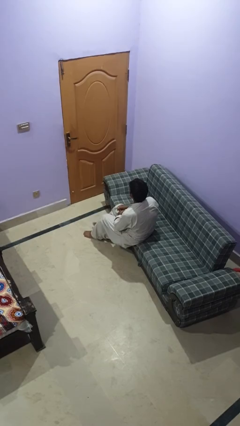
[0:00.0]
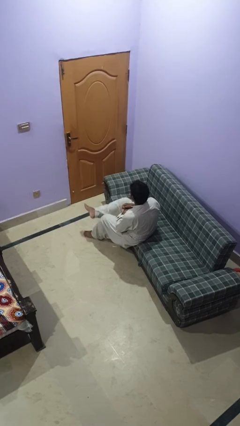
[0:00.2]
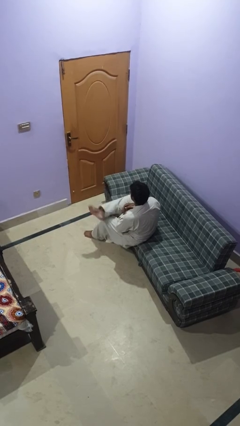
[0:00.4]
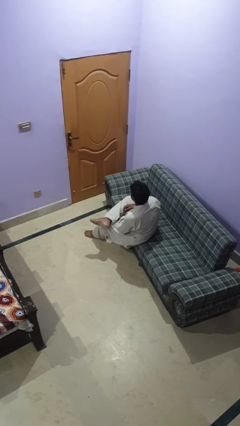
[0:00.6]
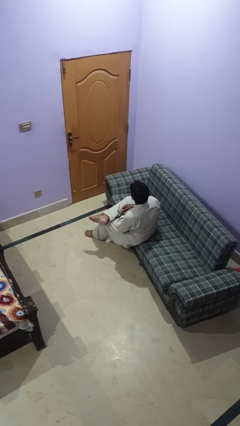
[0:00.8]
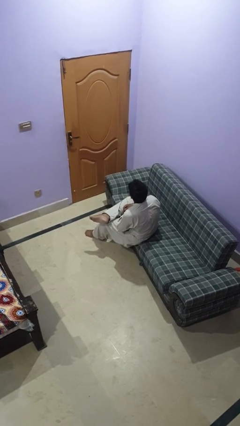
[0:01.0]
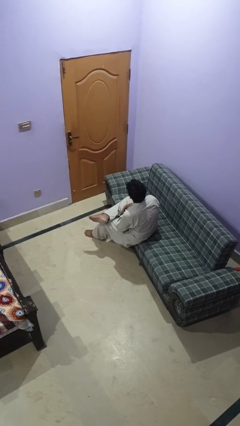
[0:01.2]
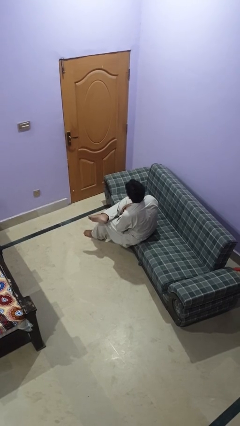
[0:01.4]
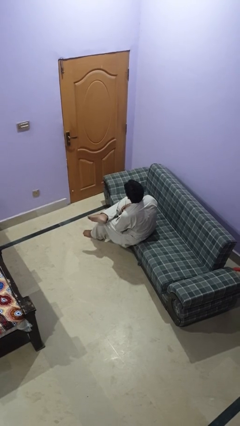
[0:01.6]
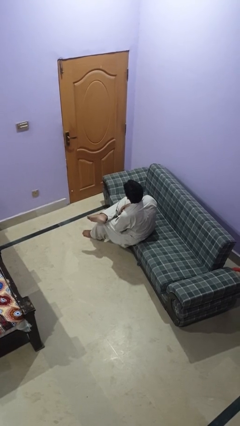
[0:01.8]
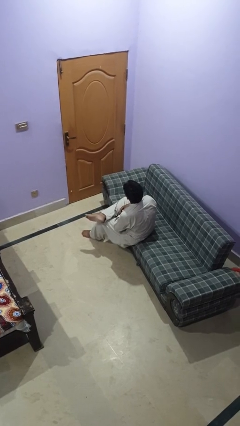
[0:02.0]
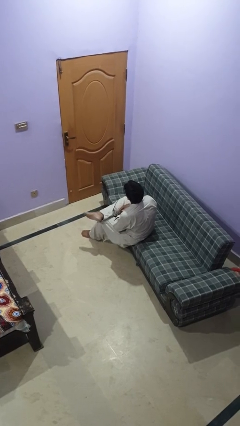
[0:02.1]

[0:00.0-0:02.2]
person crosses legs

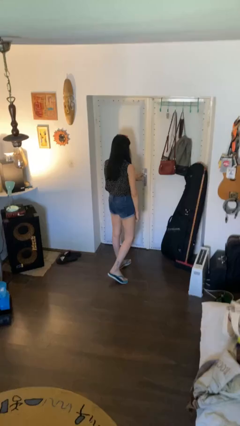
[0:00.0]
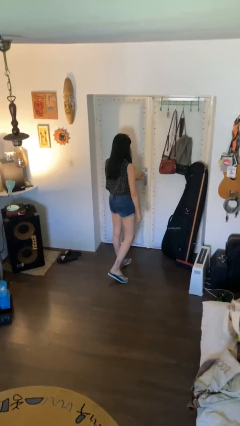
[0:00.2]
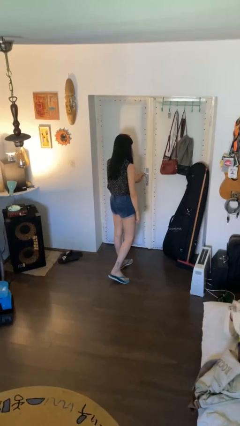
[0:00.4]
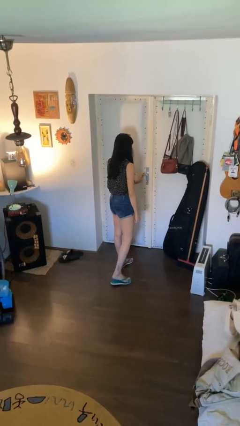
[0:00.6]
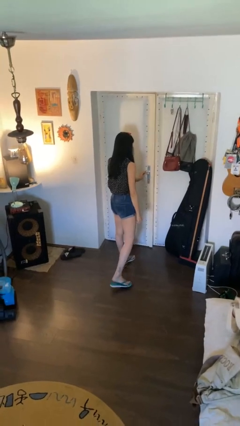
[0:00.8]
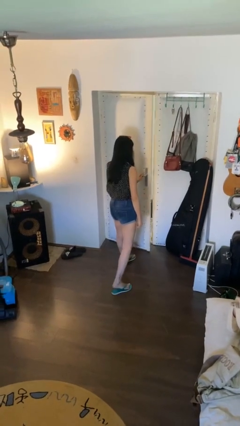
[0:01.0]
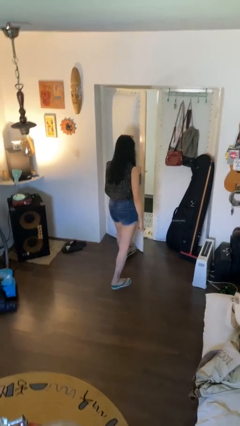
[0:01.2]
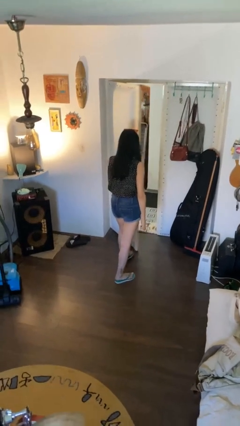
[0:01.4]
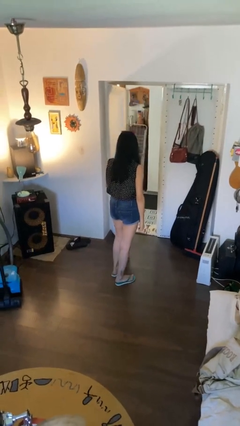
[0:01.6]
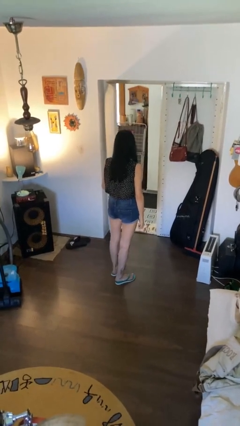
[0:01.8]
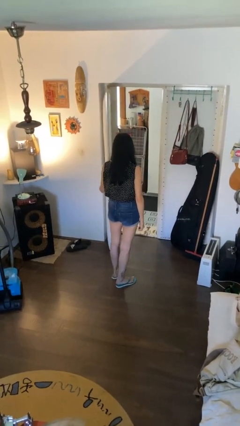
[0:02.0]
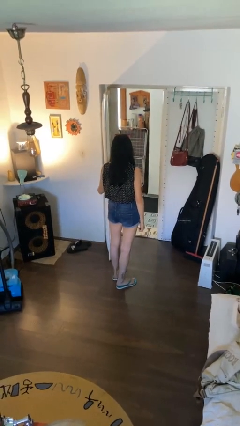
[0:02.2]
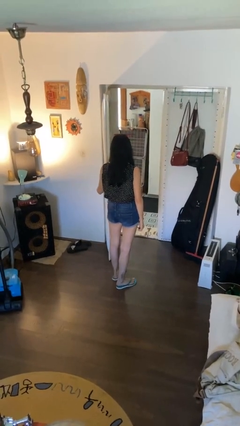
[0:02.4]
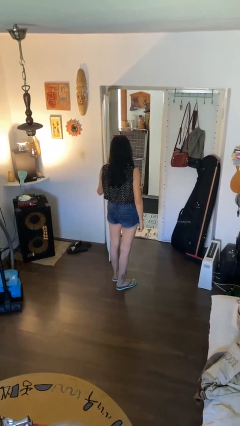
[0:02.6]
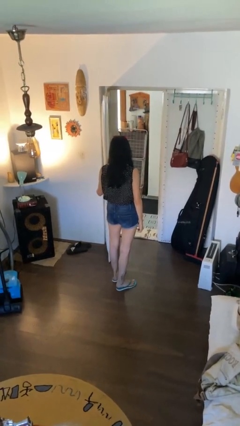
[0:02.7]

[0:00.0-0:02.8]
person opens facility door

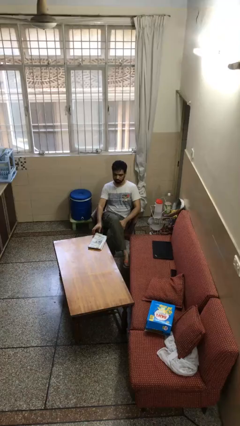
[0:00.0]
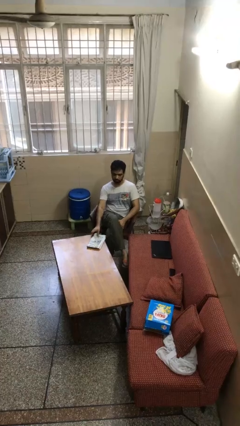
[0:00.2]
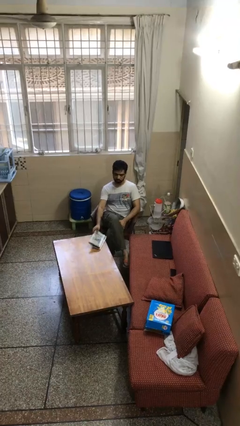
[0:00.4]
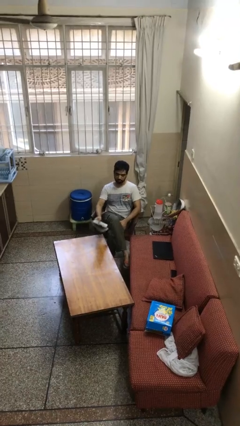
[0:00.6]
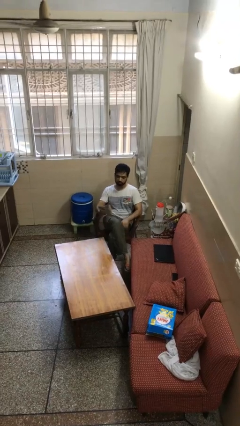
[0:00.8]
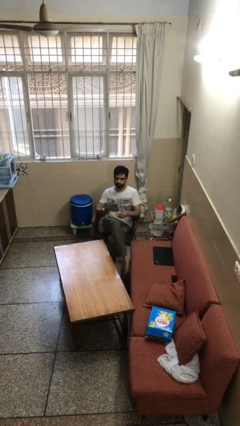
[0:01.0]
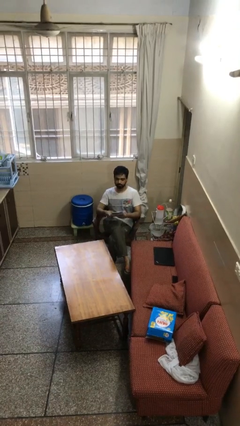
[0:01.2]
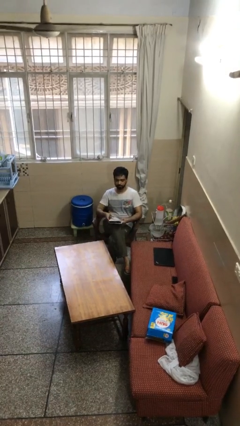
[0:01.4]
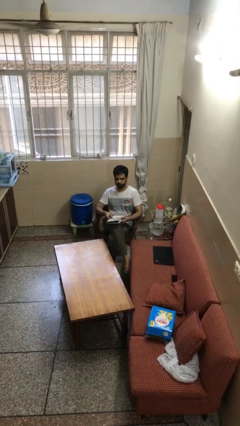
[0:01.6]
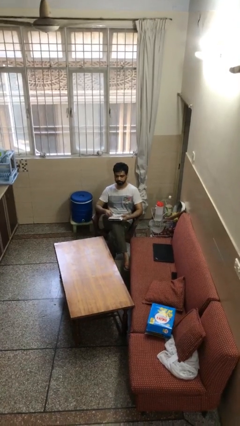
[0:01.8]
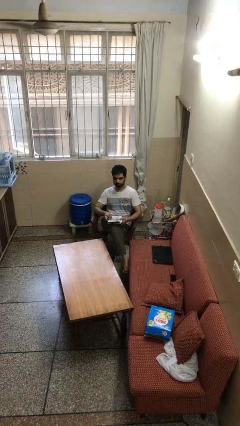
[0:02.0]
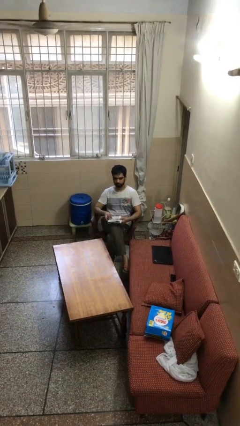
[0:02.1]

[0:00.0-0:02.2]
person picks up object from table

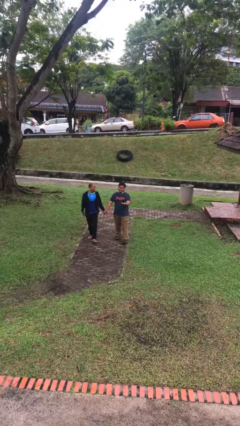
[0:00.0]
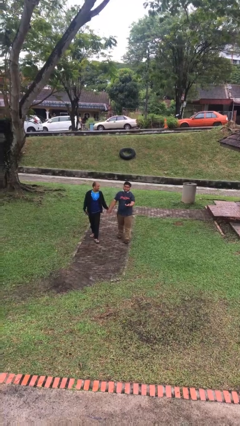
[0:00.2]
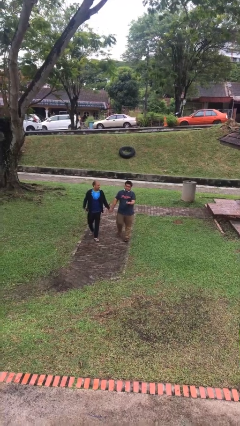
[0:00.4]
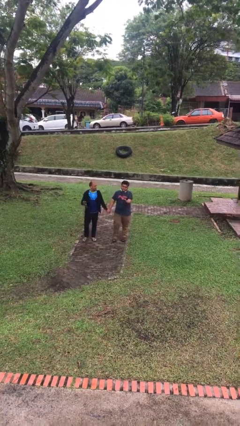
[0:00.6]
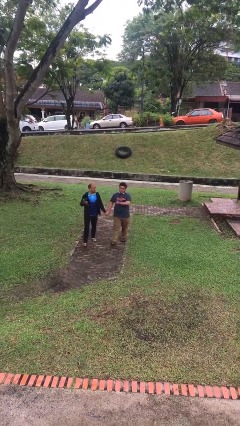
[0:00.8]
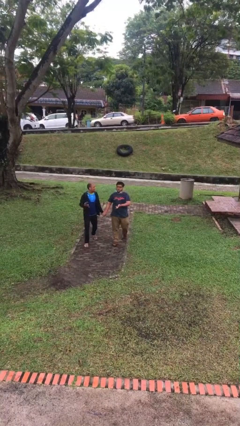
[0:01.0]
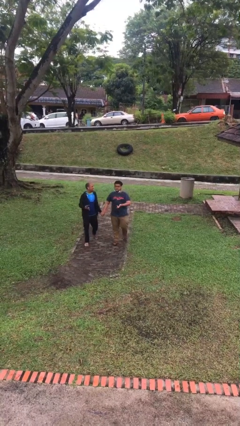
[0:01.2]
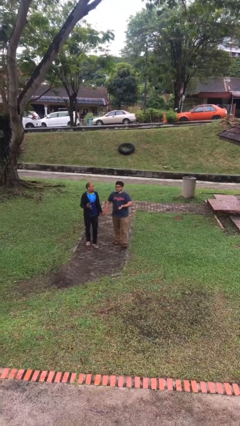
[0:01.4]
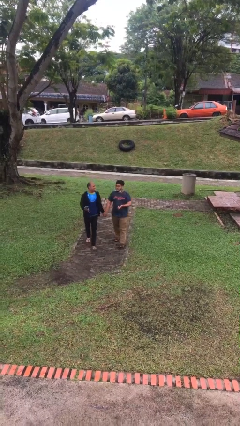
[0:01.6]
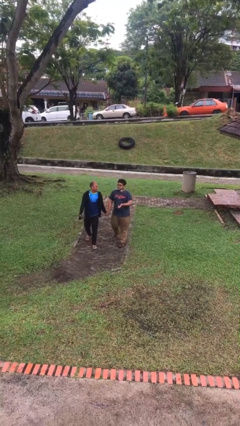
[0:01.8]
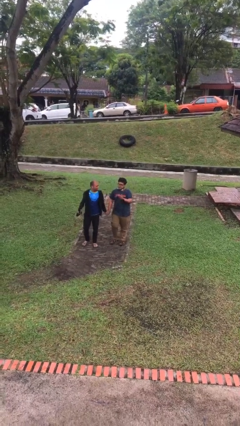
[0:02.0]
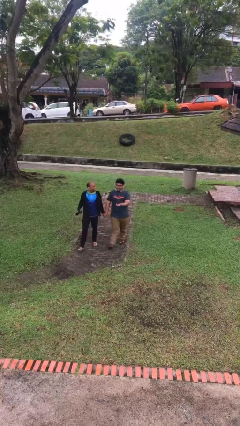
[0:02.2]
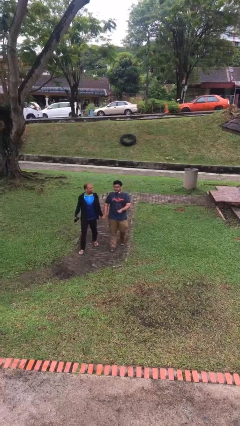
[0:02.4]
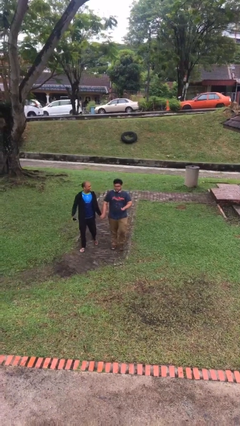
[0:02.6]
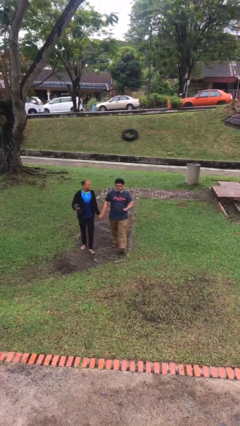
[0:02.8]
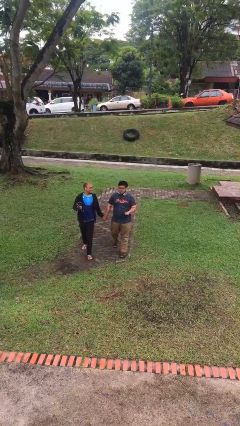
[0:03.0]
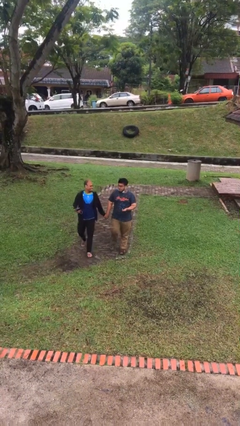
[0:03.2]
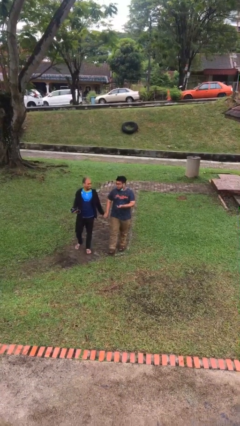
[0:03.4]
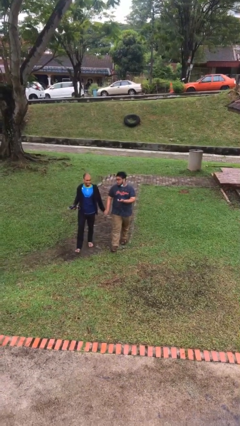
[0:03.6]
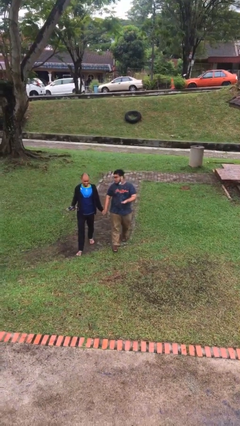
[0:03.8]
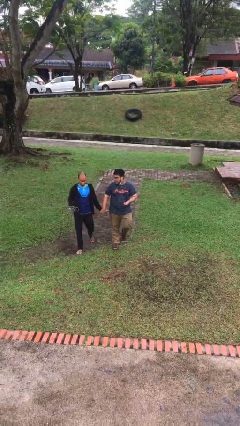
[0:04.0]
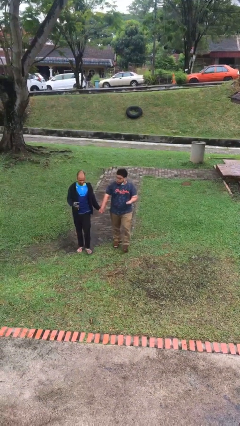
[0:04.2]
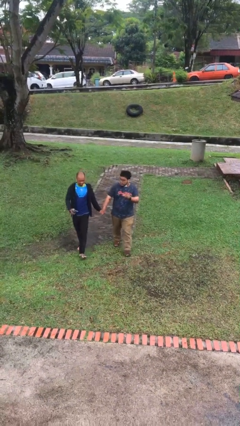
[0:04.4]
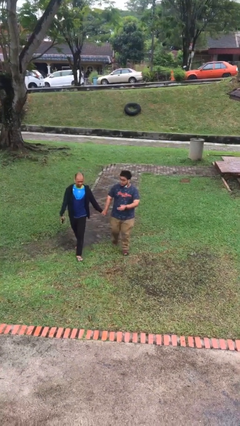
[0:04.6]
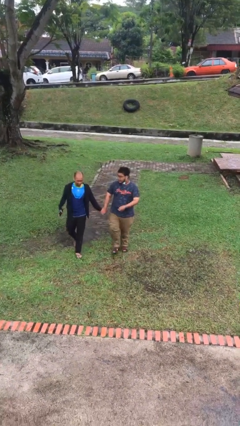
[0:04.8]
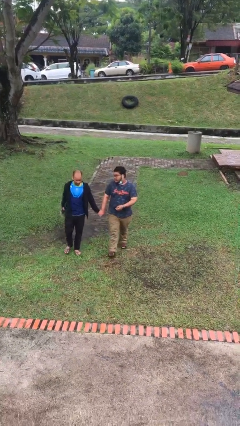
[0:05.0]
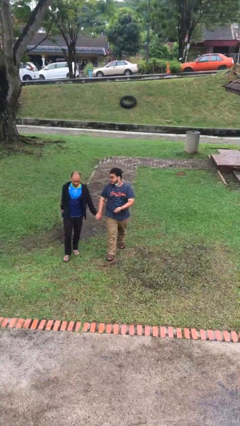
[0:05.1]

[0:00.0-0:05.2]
person holds hand

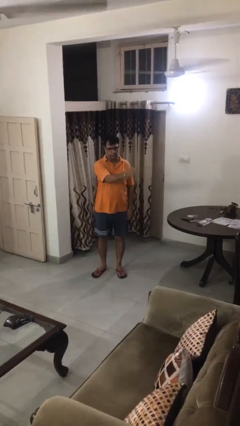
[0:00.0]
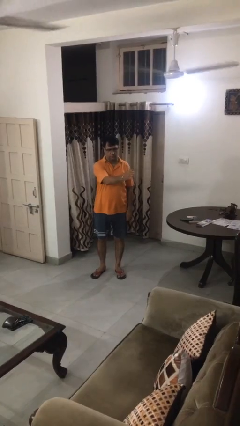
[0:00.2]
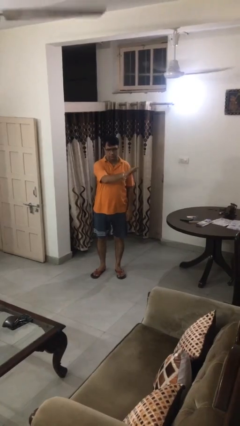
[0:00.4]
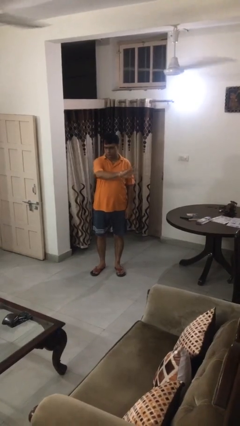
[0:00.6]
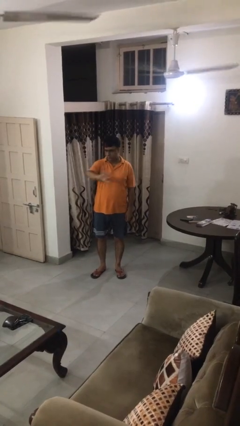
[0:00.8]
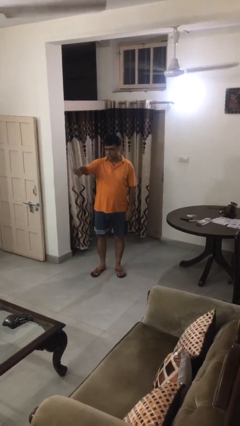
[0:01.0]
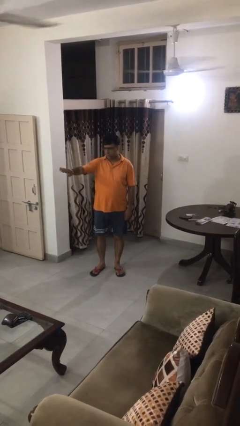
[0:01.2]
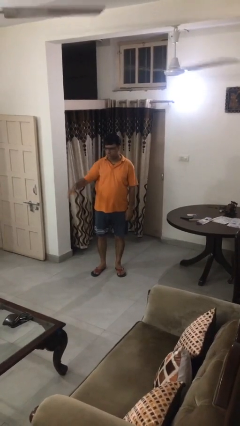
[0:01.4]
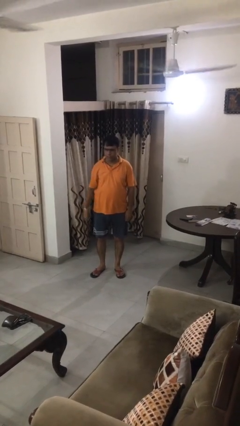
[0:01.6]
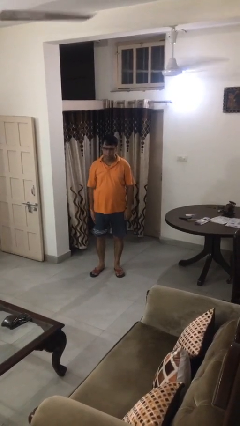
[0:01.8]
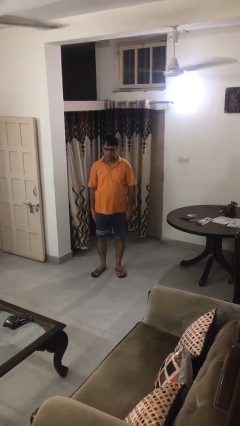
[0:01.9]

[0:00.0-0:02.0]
person gestures swipe right

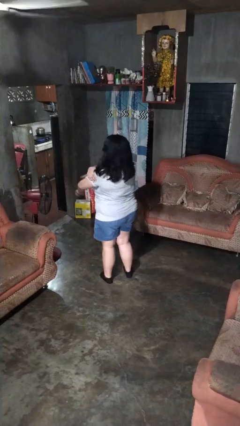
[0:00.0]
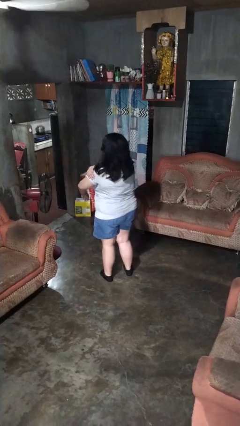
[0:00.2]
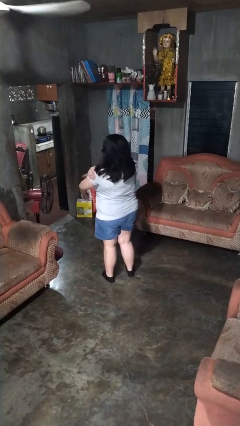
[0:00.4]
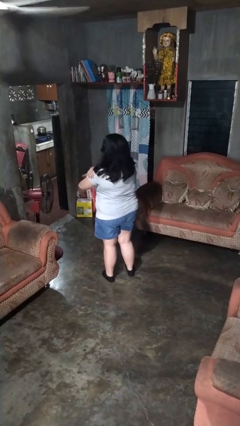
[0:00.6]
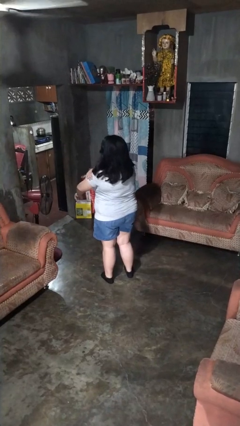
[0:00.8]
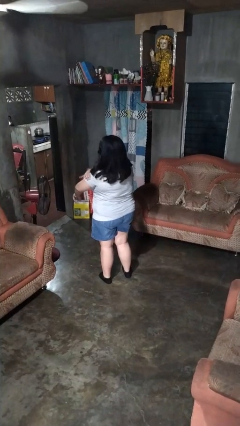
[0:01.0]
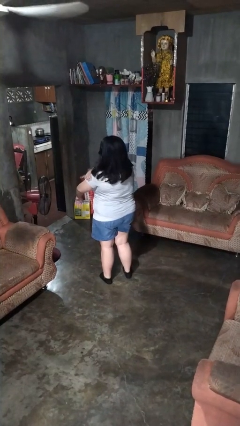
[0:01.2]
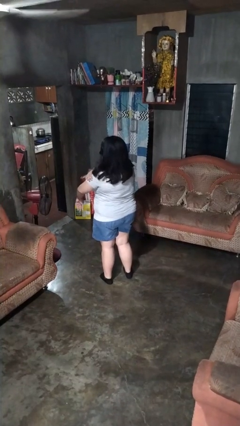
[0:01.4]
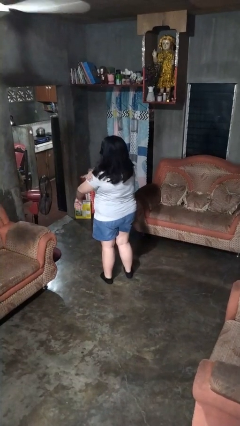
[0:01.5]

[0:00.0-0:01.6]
person swats bug

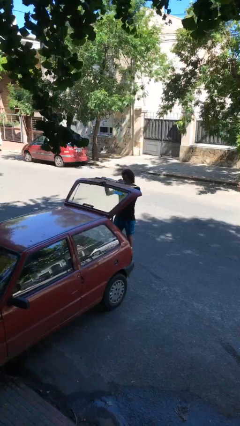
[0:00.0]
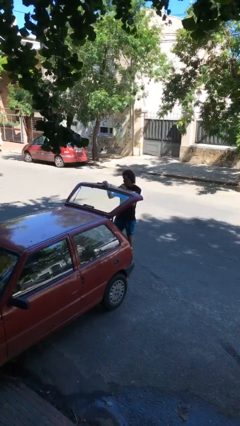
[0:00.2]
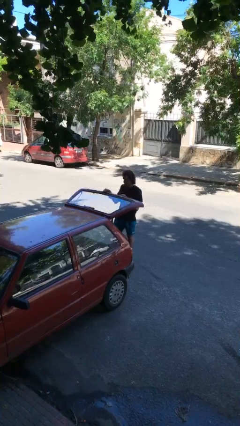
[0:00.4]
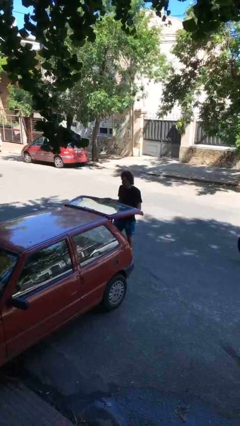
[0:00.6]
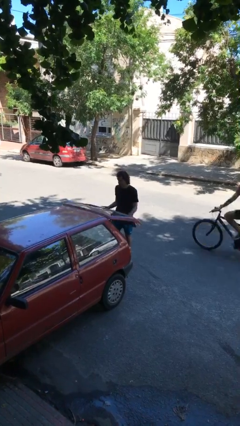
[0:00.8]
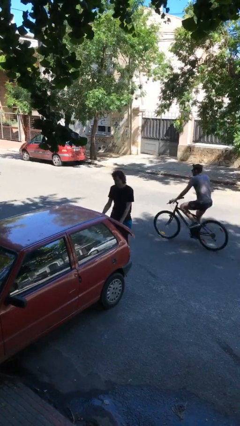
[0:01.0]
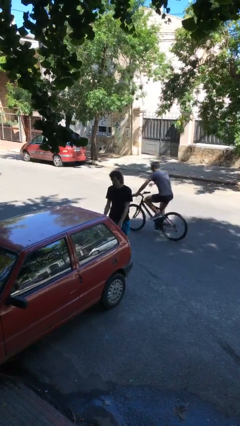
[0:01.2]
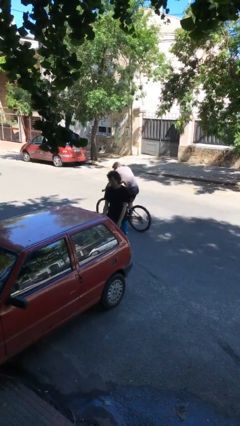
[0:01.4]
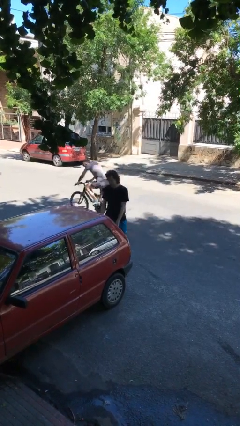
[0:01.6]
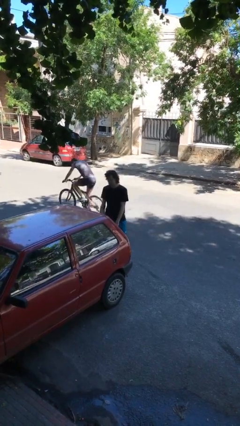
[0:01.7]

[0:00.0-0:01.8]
person closes car trunk
